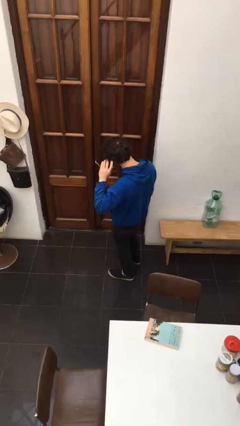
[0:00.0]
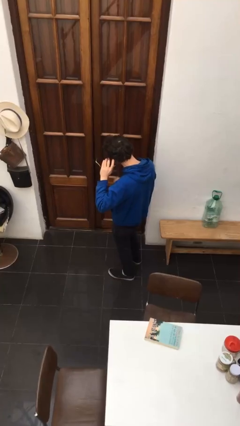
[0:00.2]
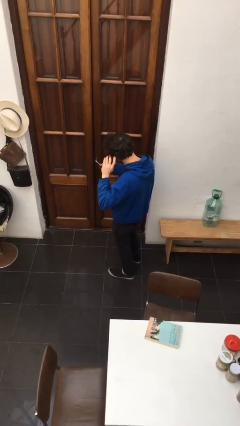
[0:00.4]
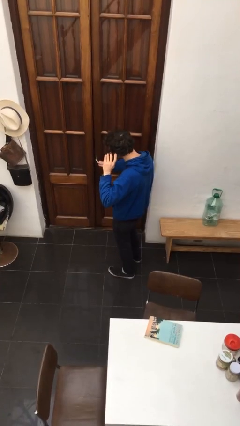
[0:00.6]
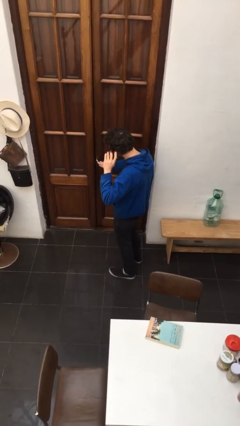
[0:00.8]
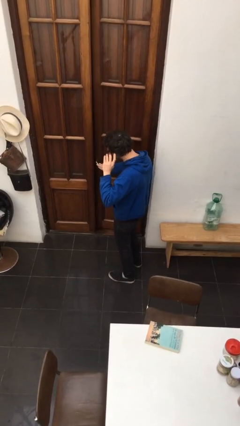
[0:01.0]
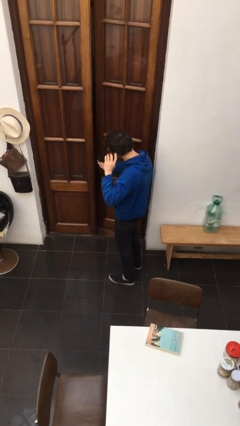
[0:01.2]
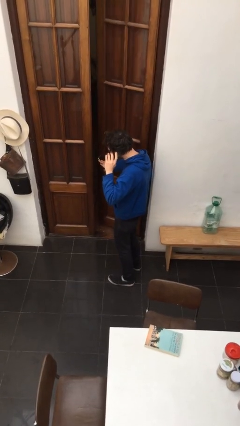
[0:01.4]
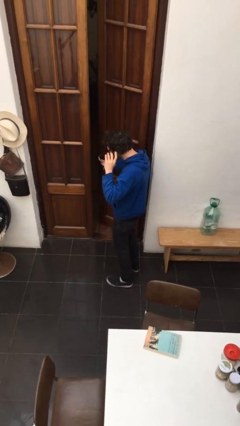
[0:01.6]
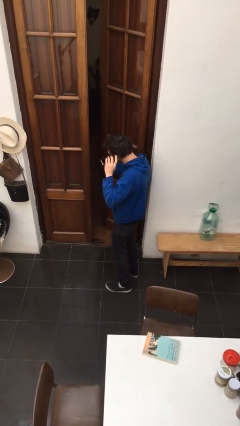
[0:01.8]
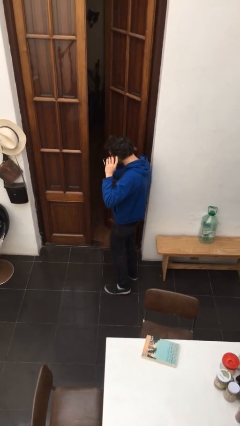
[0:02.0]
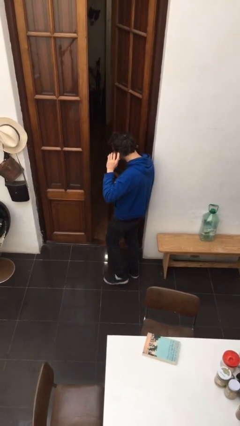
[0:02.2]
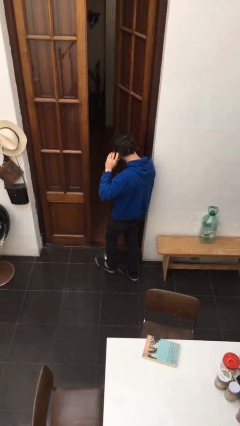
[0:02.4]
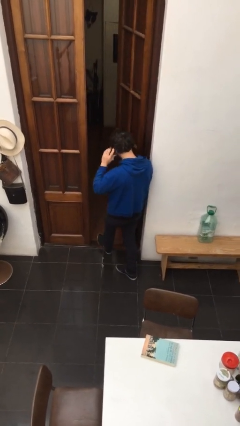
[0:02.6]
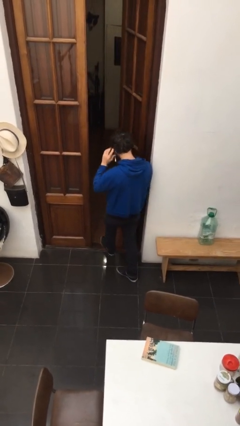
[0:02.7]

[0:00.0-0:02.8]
person opens facility door

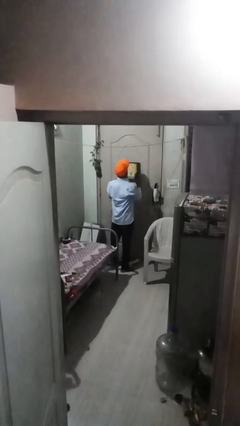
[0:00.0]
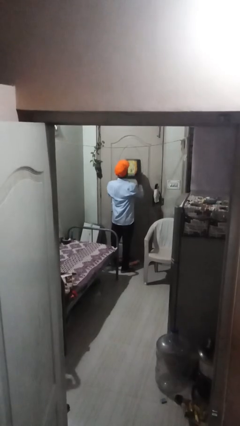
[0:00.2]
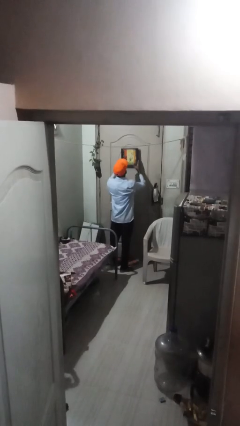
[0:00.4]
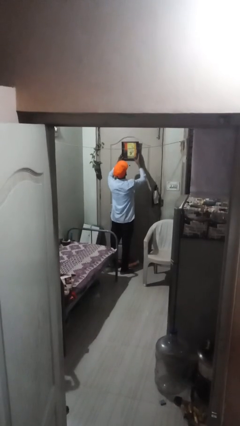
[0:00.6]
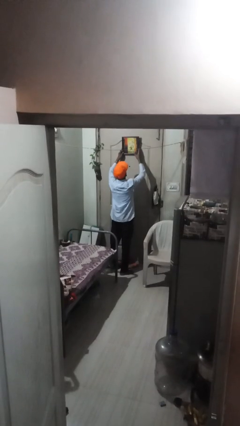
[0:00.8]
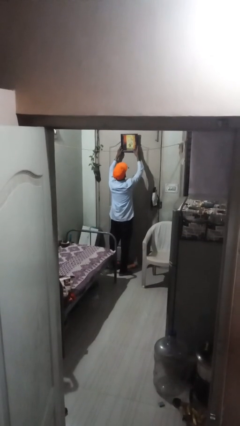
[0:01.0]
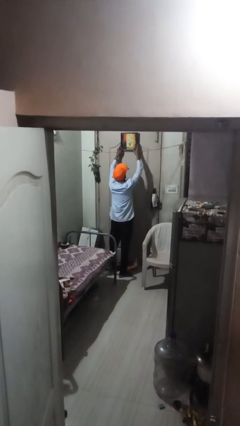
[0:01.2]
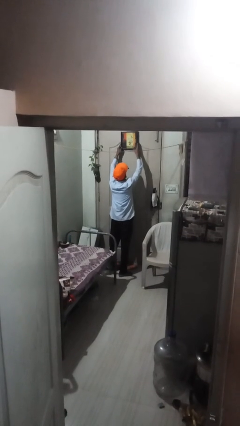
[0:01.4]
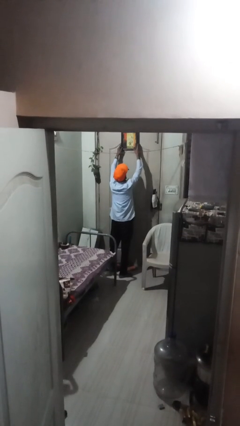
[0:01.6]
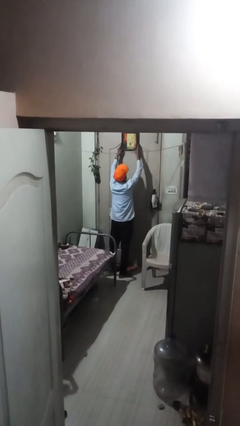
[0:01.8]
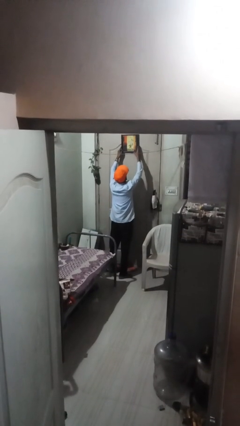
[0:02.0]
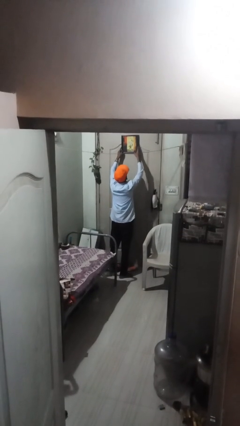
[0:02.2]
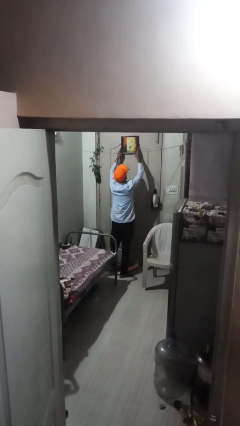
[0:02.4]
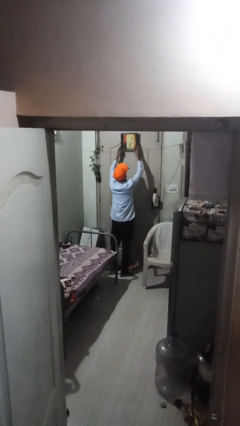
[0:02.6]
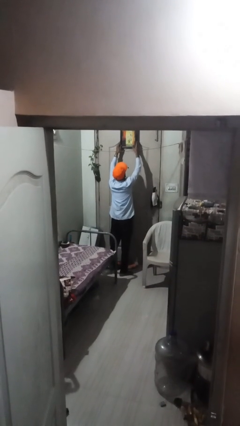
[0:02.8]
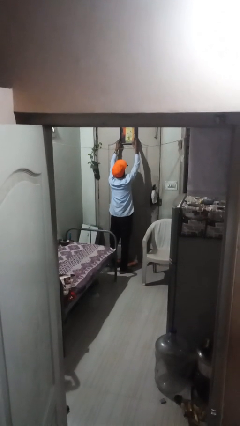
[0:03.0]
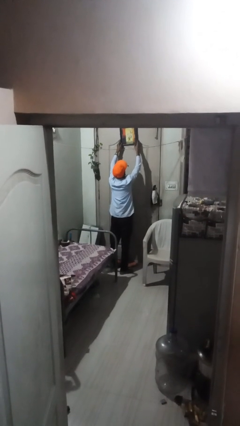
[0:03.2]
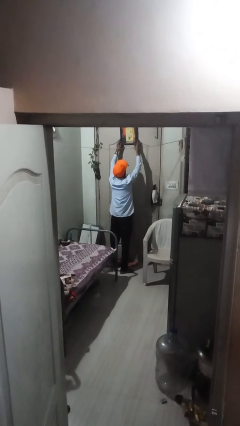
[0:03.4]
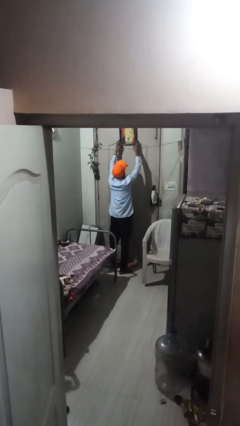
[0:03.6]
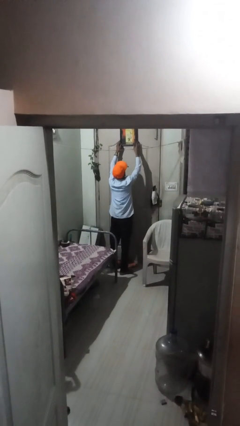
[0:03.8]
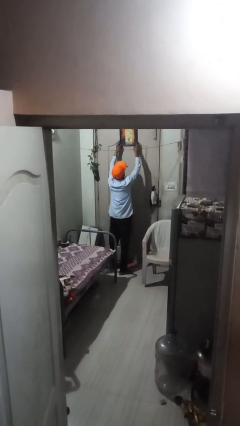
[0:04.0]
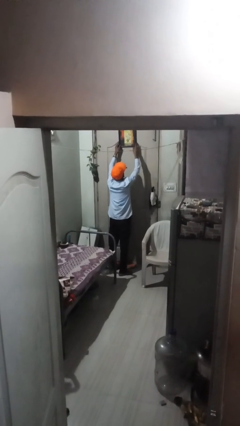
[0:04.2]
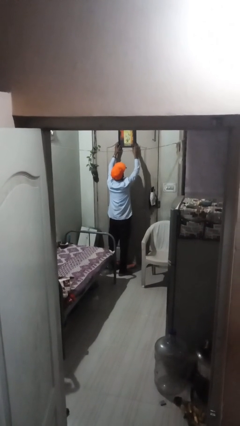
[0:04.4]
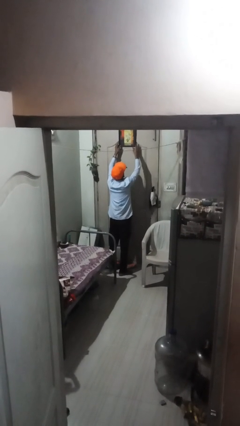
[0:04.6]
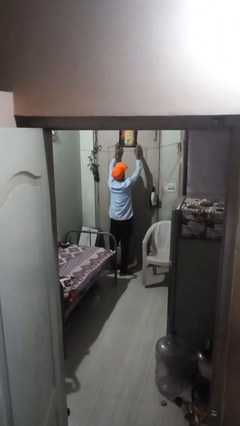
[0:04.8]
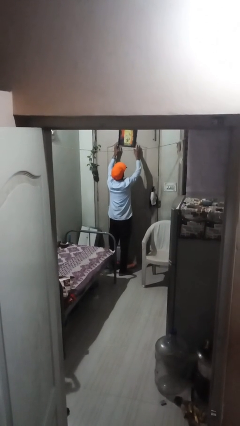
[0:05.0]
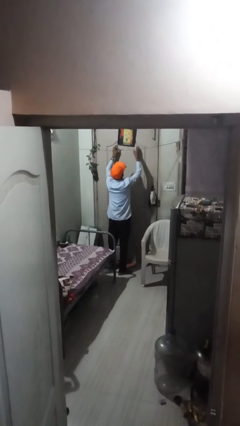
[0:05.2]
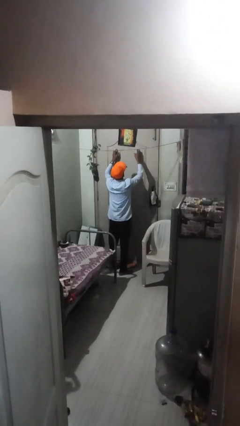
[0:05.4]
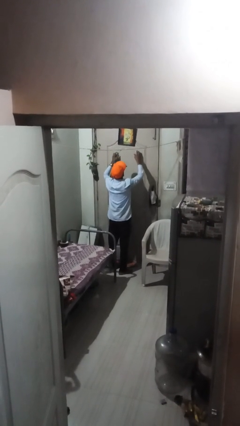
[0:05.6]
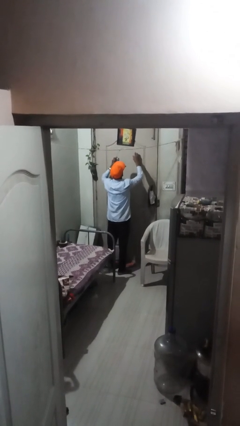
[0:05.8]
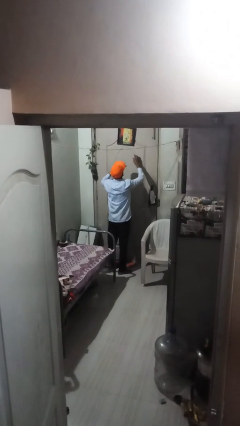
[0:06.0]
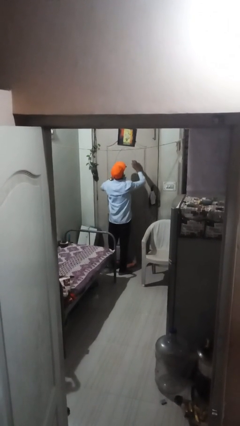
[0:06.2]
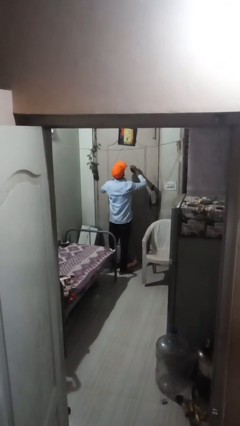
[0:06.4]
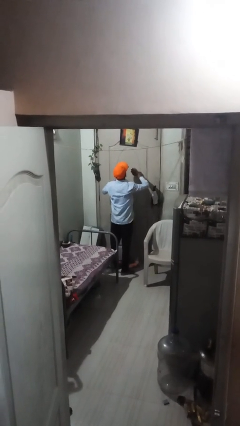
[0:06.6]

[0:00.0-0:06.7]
person puts up picture frame

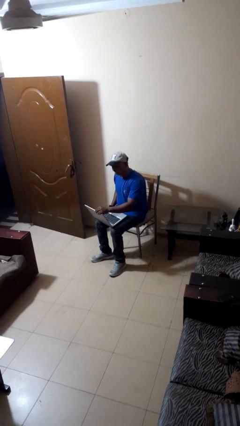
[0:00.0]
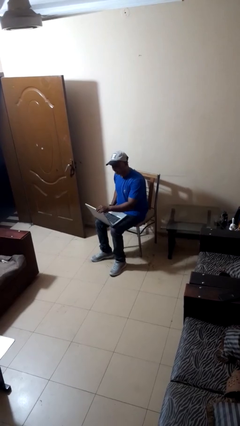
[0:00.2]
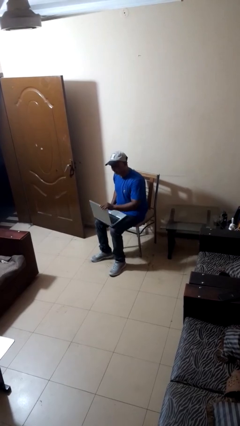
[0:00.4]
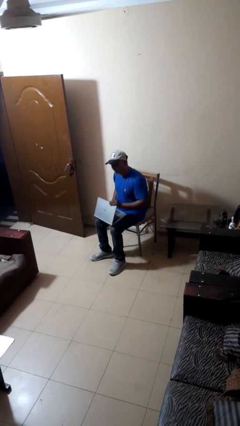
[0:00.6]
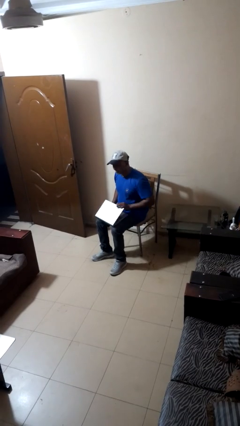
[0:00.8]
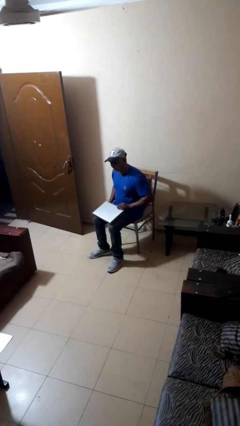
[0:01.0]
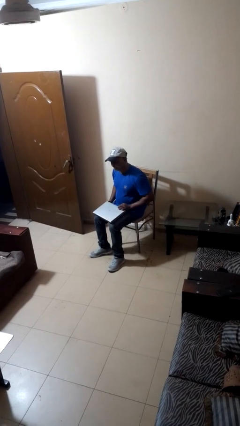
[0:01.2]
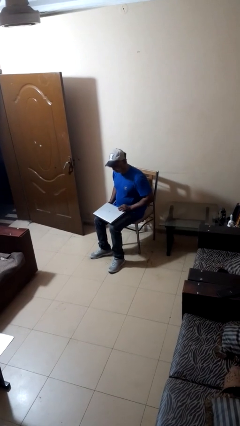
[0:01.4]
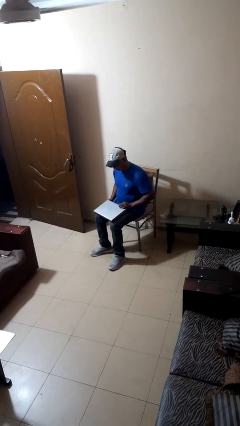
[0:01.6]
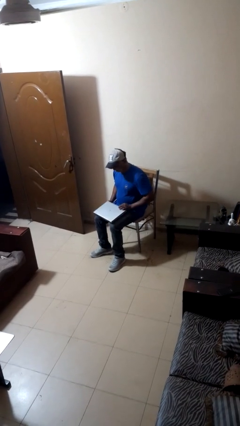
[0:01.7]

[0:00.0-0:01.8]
person closes laptop

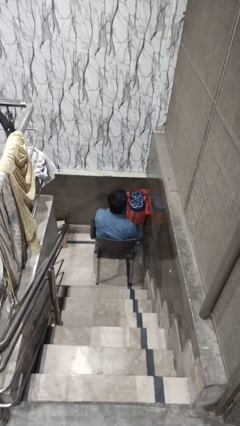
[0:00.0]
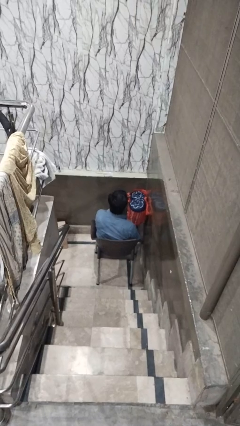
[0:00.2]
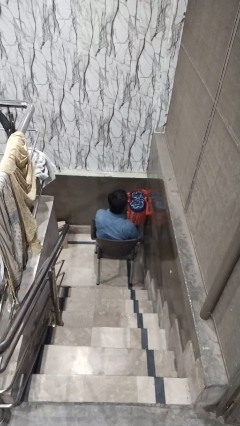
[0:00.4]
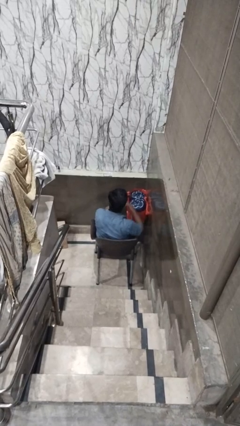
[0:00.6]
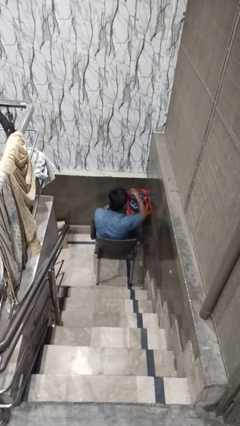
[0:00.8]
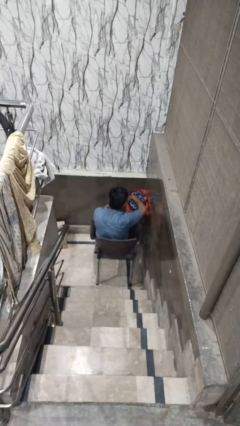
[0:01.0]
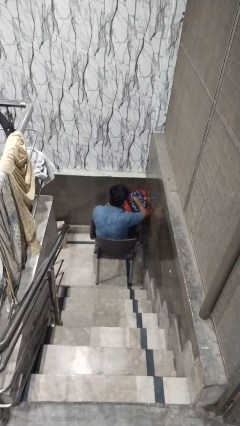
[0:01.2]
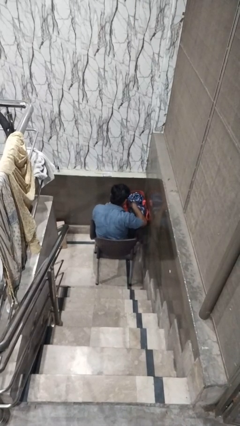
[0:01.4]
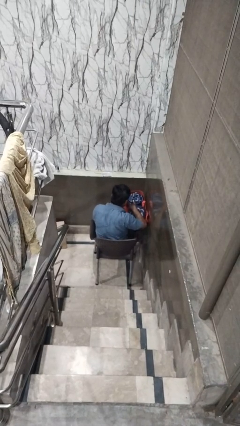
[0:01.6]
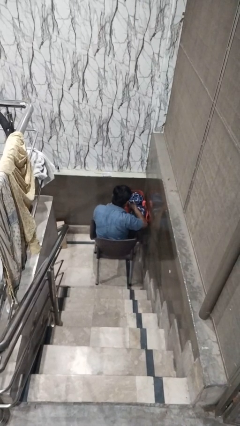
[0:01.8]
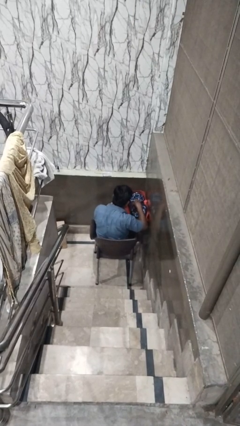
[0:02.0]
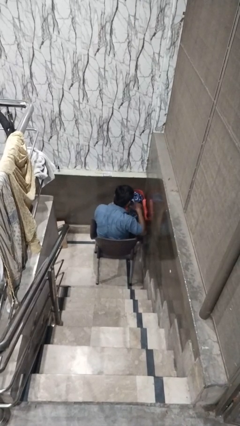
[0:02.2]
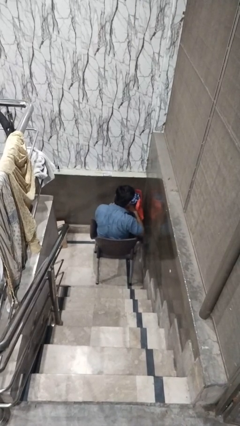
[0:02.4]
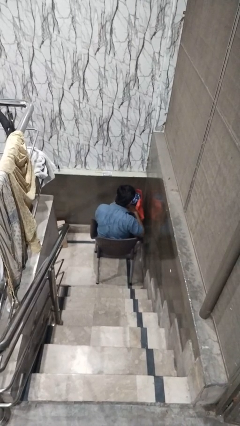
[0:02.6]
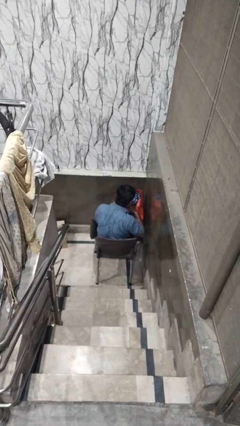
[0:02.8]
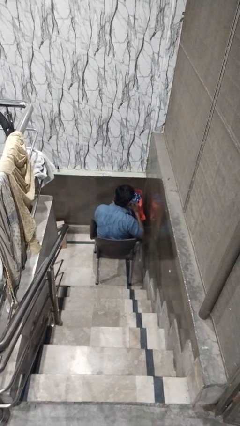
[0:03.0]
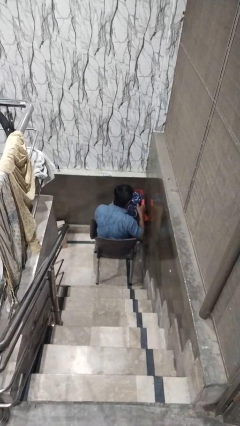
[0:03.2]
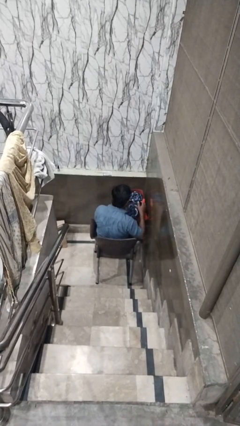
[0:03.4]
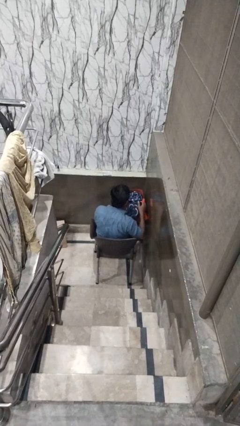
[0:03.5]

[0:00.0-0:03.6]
person searches in bag

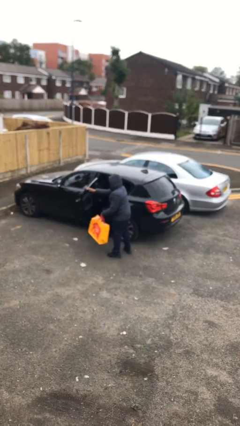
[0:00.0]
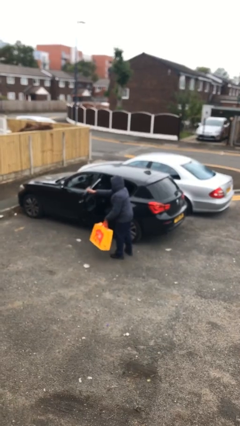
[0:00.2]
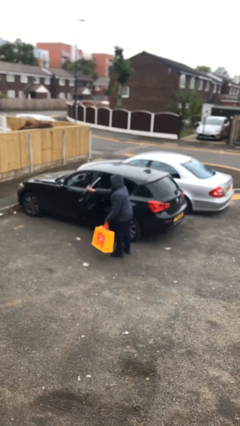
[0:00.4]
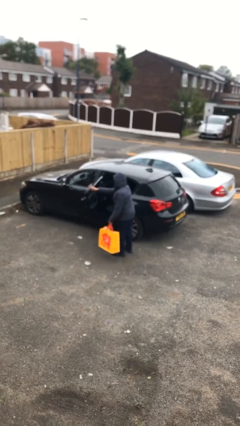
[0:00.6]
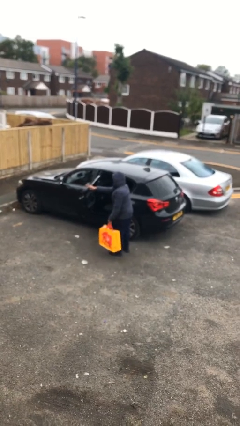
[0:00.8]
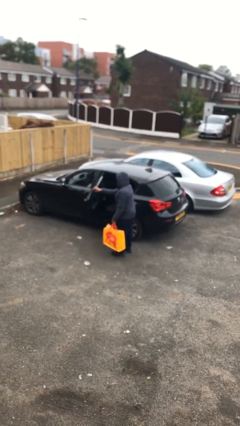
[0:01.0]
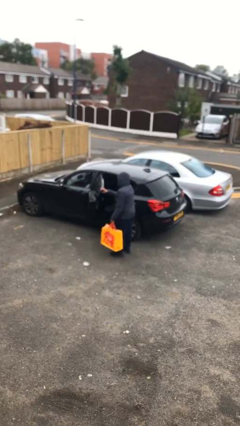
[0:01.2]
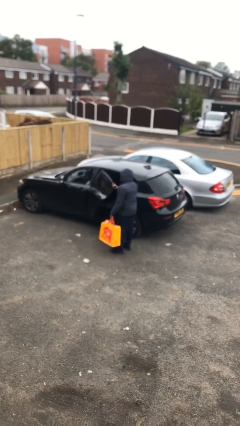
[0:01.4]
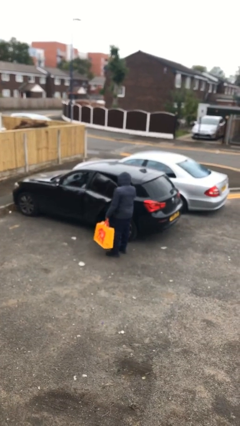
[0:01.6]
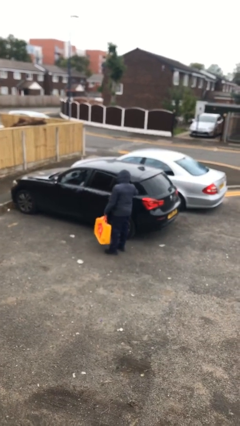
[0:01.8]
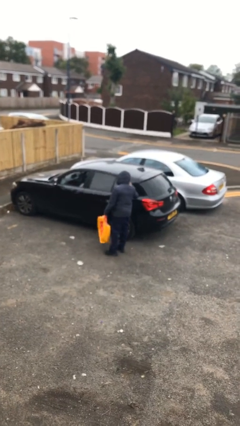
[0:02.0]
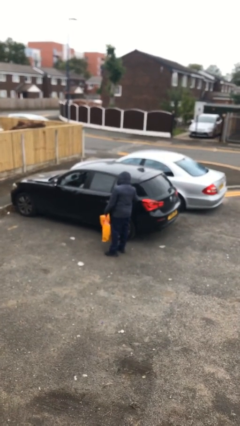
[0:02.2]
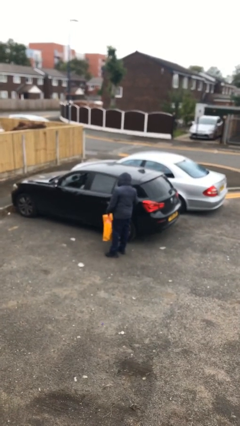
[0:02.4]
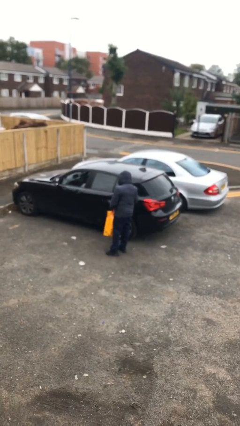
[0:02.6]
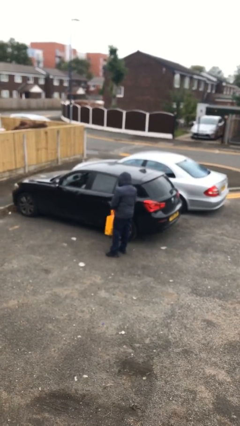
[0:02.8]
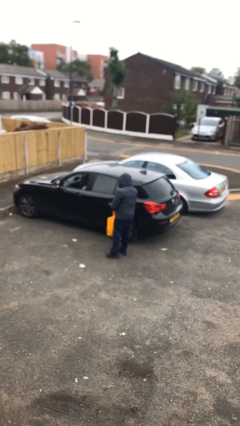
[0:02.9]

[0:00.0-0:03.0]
person closes car door
